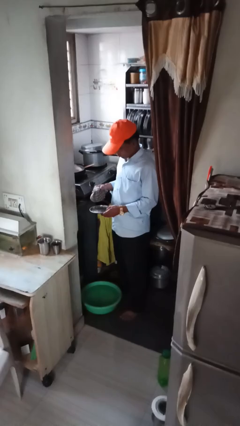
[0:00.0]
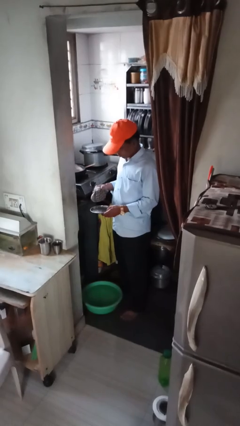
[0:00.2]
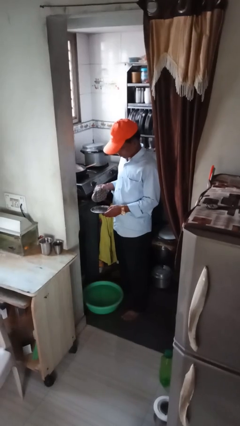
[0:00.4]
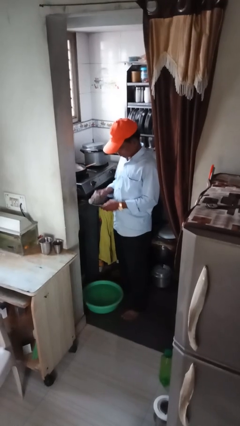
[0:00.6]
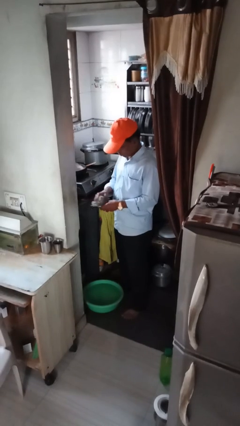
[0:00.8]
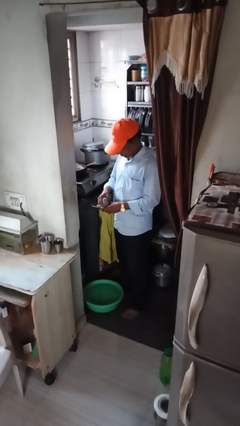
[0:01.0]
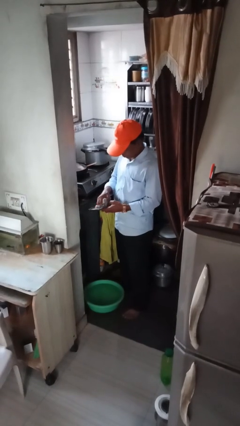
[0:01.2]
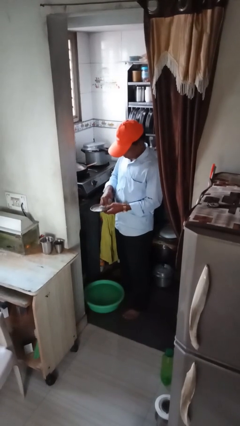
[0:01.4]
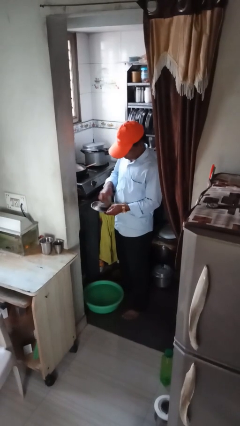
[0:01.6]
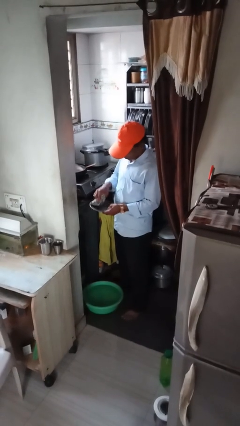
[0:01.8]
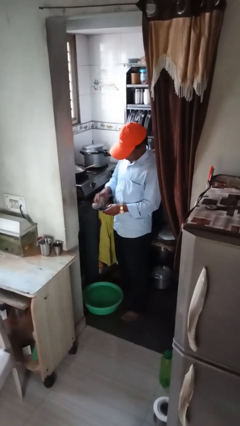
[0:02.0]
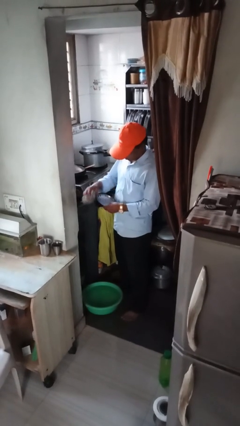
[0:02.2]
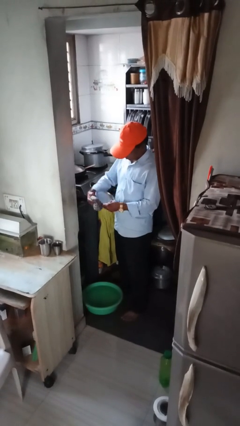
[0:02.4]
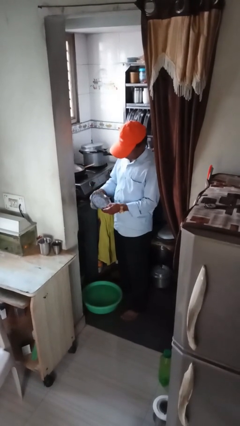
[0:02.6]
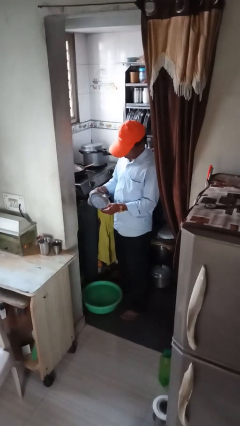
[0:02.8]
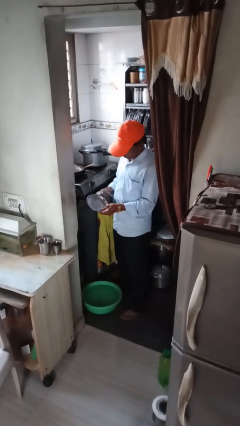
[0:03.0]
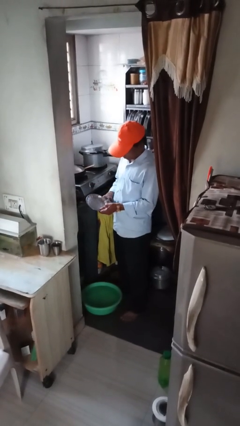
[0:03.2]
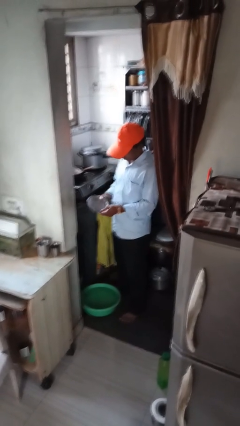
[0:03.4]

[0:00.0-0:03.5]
person dries dish

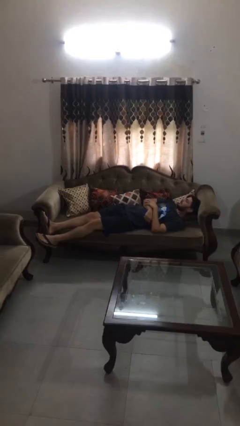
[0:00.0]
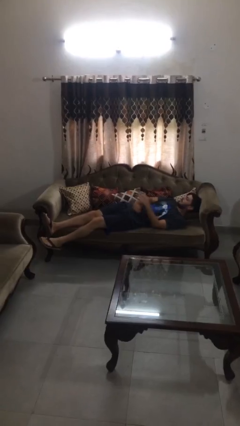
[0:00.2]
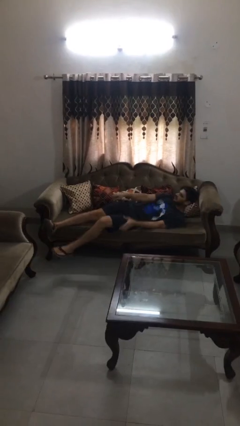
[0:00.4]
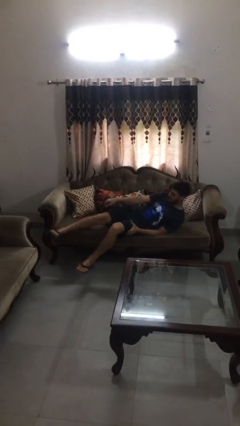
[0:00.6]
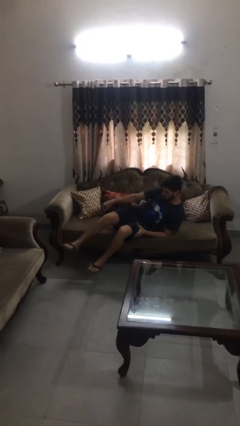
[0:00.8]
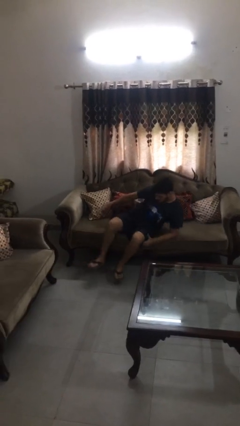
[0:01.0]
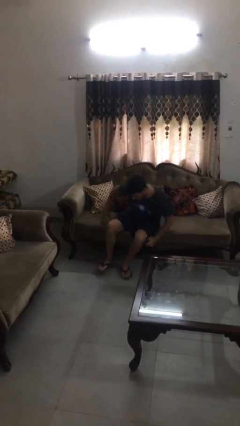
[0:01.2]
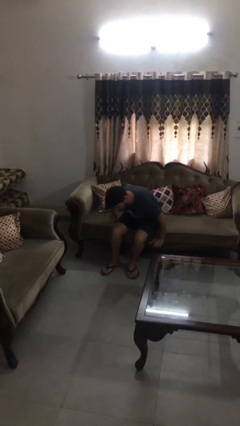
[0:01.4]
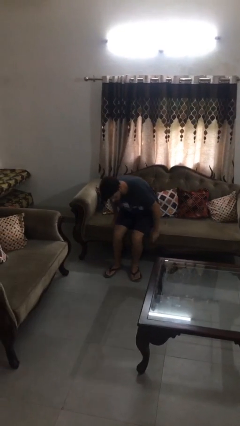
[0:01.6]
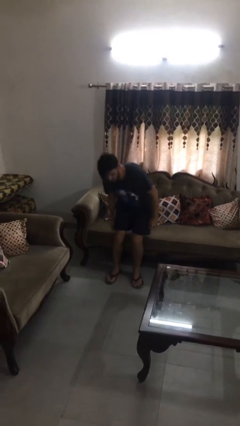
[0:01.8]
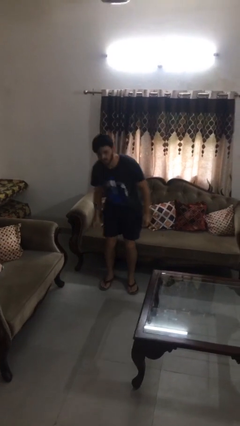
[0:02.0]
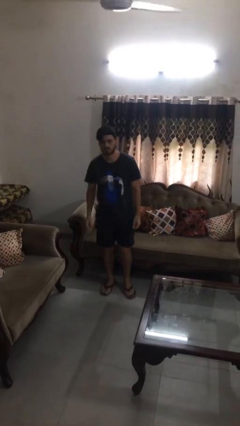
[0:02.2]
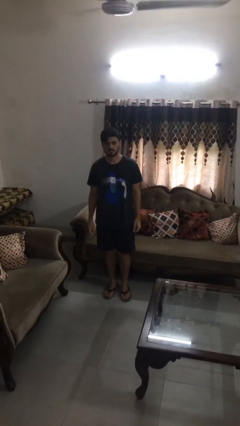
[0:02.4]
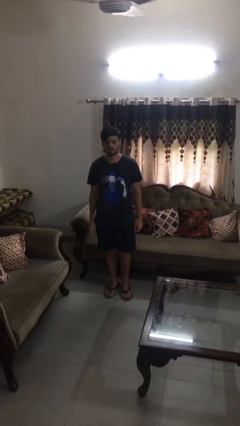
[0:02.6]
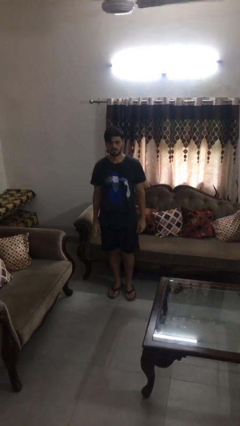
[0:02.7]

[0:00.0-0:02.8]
person stands up

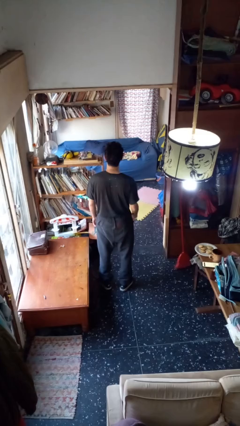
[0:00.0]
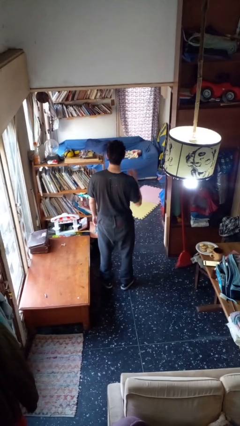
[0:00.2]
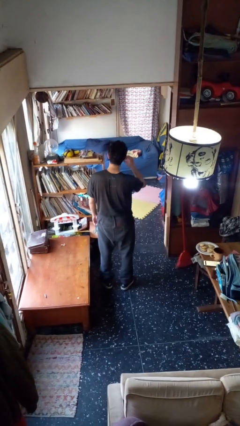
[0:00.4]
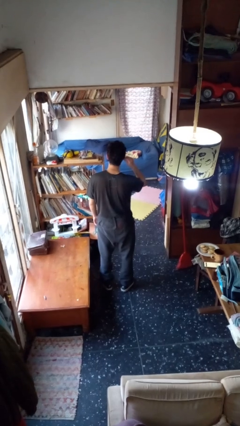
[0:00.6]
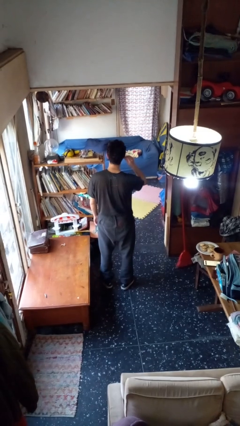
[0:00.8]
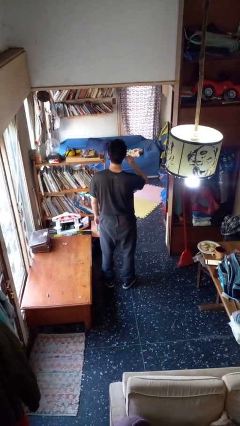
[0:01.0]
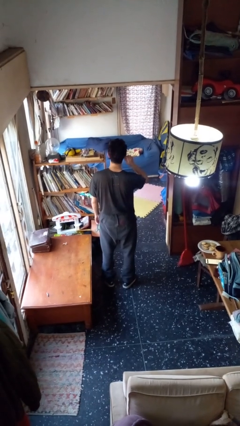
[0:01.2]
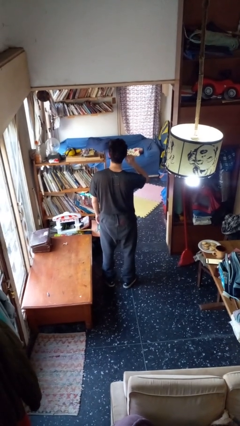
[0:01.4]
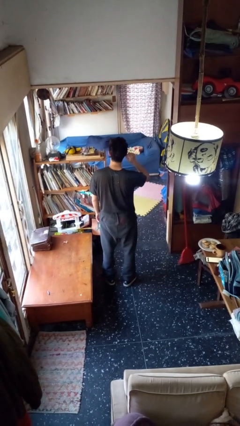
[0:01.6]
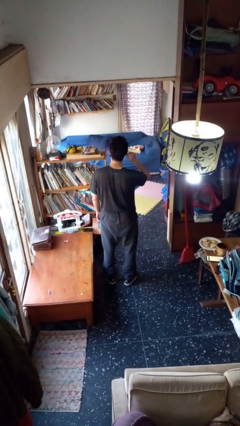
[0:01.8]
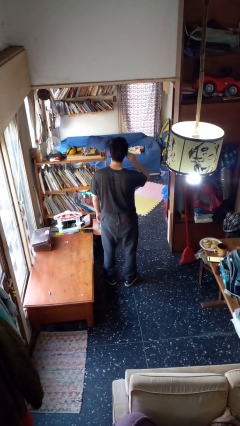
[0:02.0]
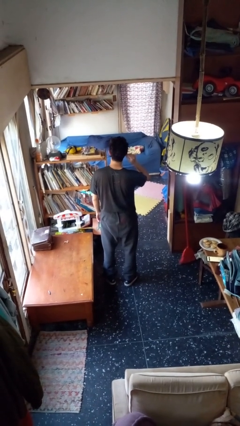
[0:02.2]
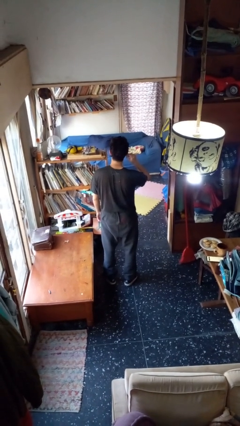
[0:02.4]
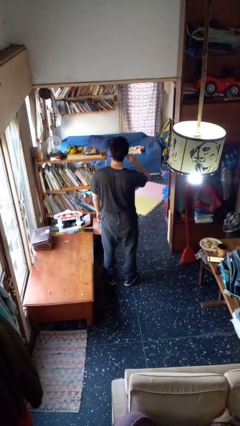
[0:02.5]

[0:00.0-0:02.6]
person touches earlobe

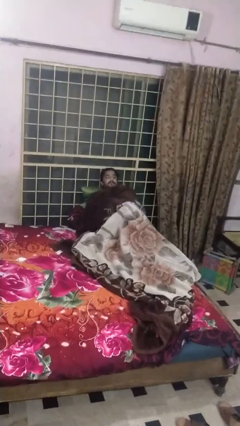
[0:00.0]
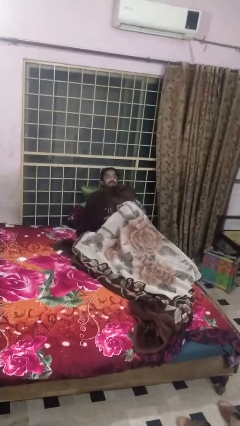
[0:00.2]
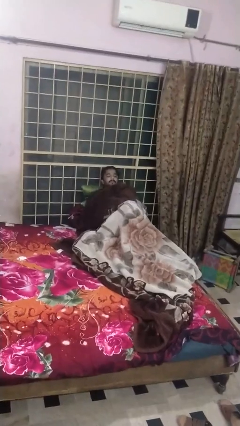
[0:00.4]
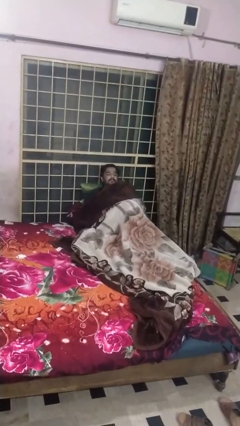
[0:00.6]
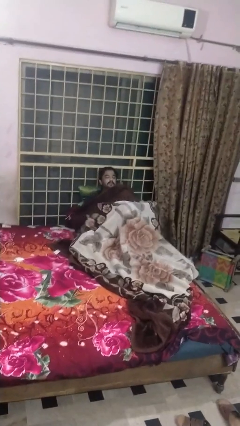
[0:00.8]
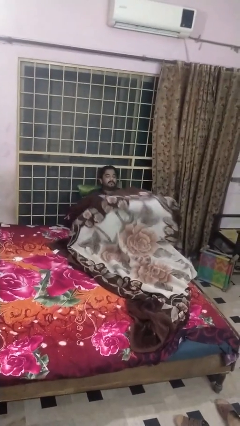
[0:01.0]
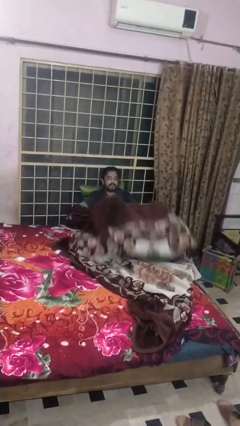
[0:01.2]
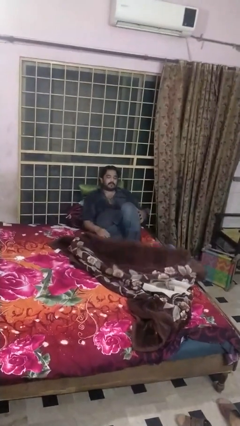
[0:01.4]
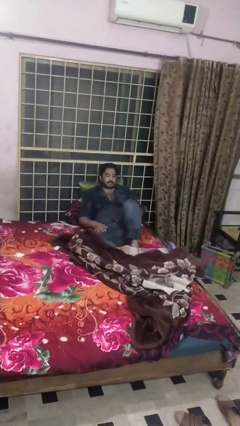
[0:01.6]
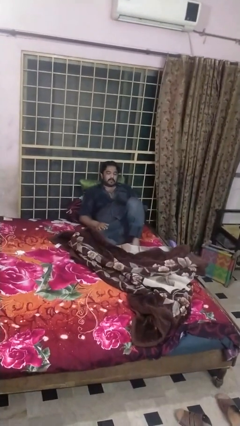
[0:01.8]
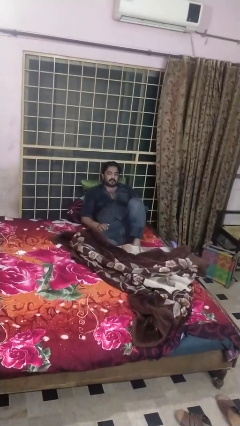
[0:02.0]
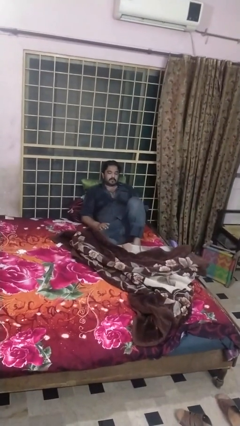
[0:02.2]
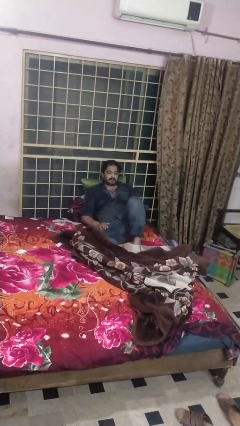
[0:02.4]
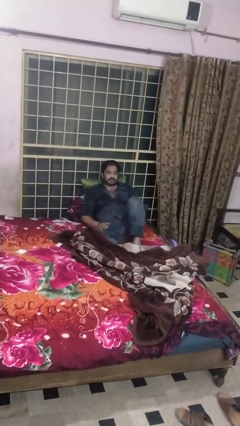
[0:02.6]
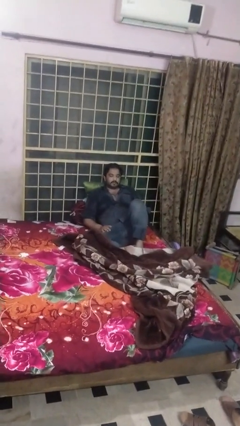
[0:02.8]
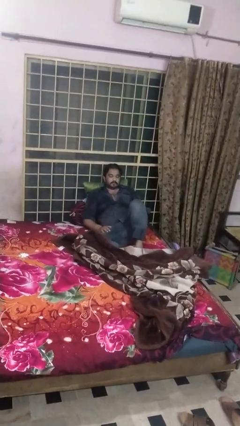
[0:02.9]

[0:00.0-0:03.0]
person uncovers with blanket

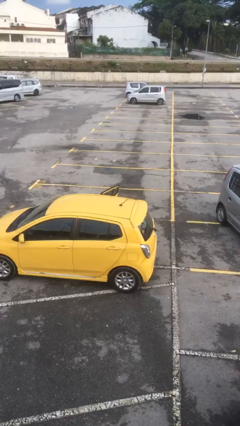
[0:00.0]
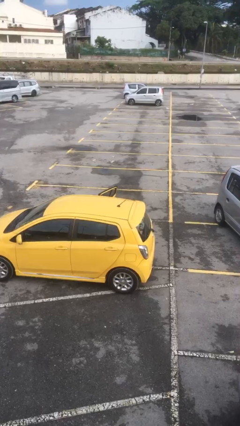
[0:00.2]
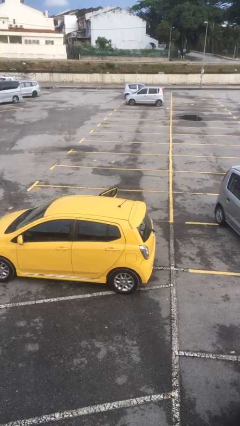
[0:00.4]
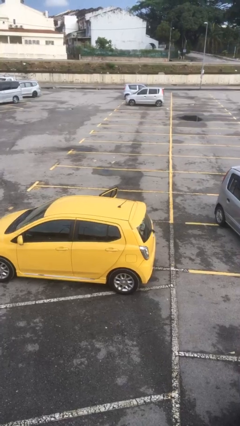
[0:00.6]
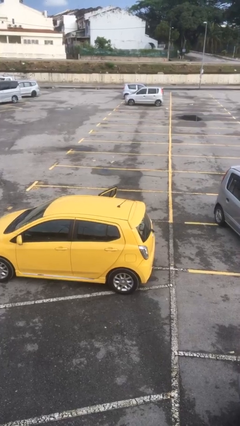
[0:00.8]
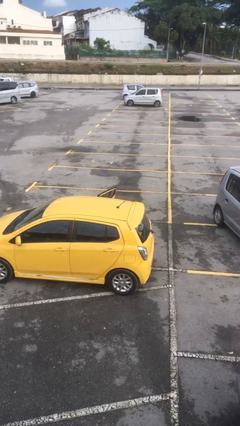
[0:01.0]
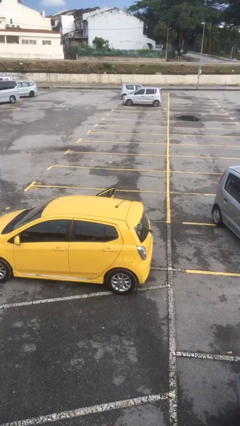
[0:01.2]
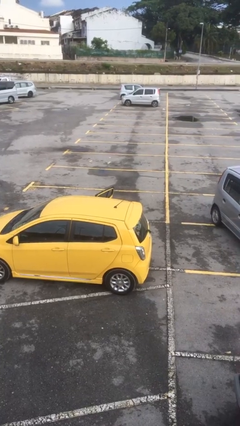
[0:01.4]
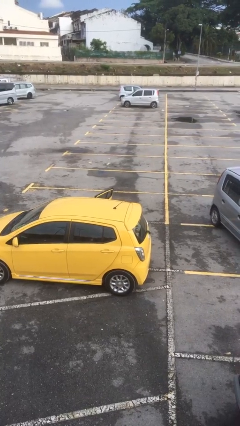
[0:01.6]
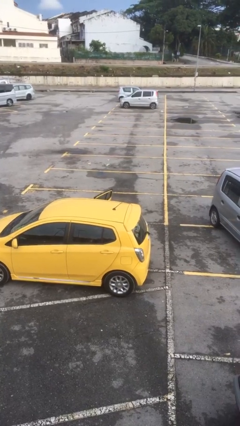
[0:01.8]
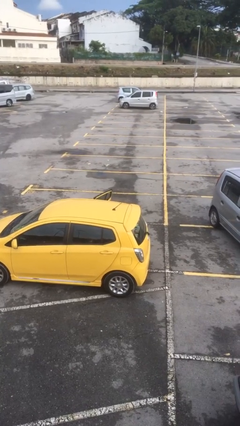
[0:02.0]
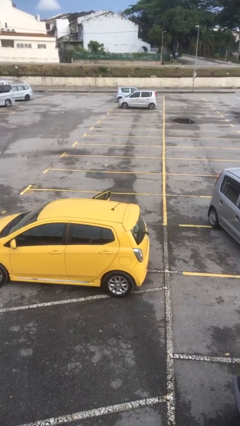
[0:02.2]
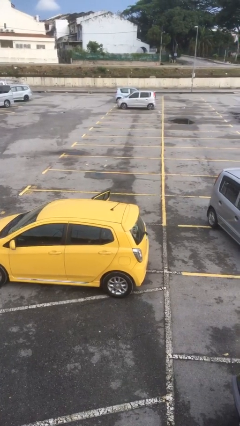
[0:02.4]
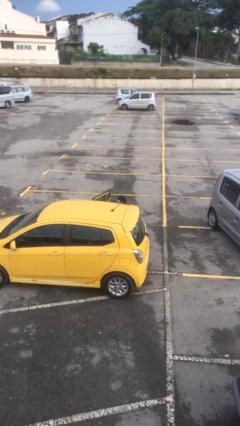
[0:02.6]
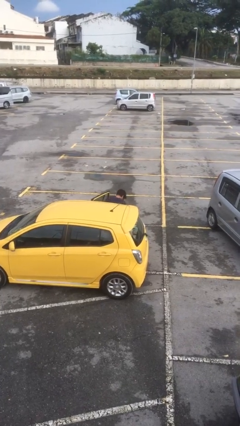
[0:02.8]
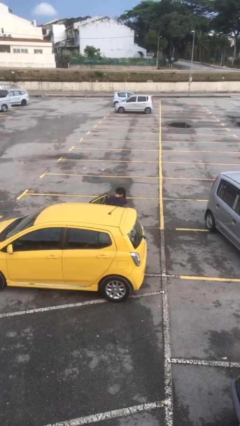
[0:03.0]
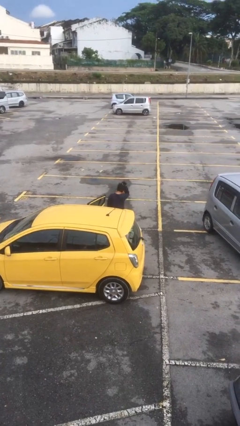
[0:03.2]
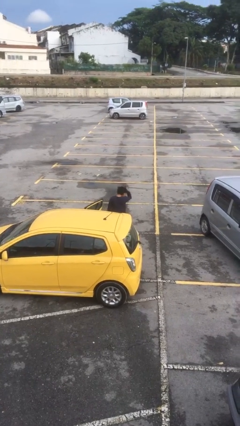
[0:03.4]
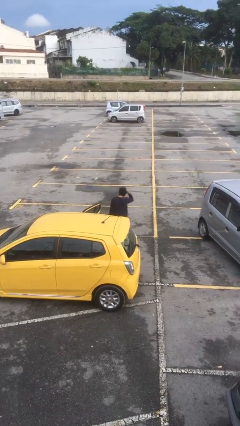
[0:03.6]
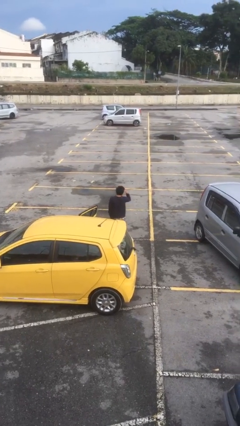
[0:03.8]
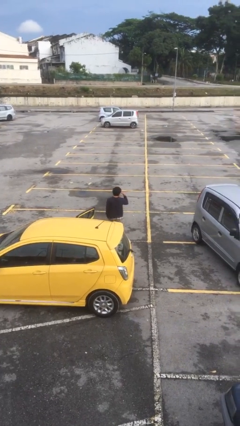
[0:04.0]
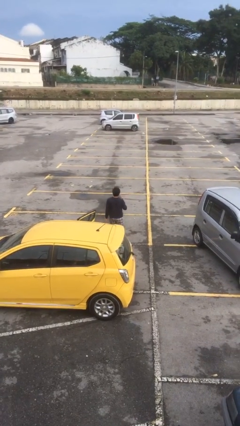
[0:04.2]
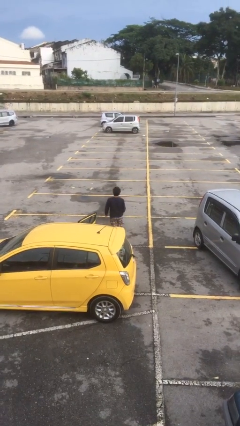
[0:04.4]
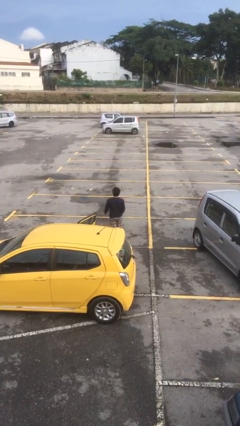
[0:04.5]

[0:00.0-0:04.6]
person exits car

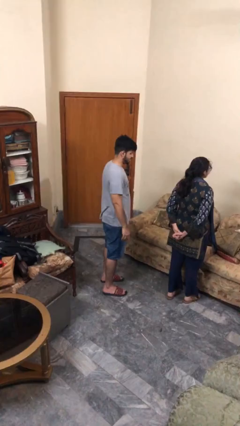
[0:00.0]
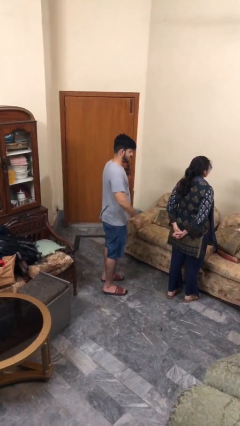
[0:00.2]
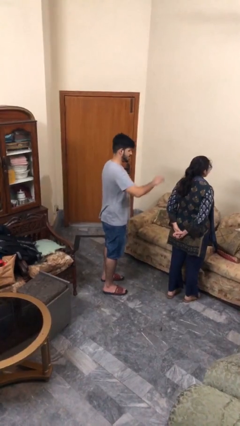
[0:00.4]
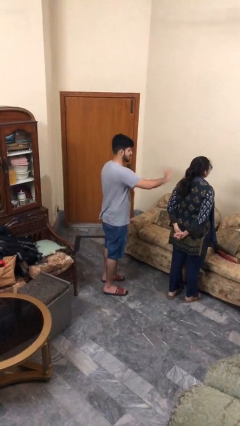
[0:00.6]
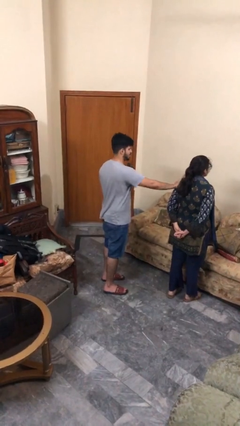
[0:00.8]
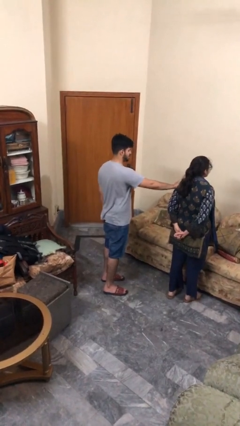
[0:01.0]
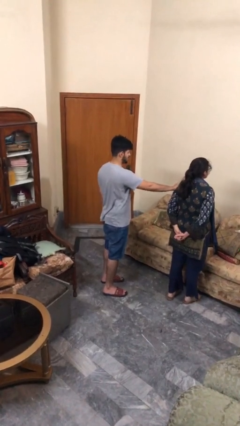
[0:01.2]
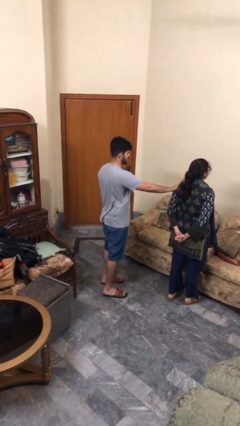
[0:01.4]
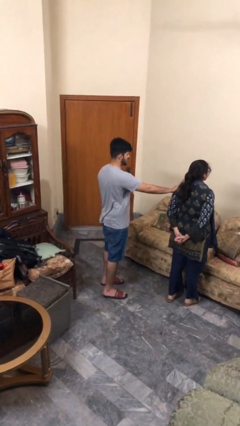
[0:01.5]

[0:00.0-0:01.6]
person grabs person by shoulder
